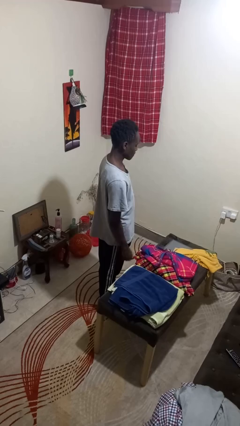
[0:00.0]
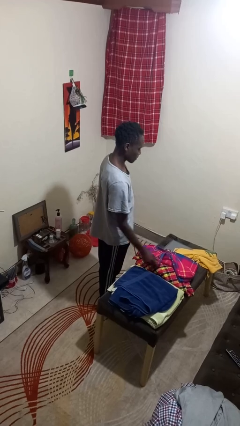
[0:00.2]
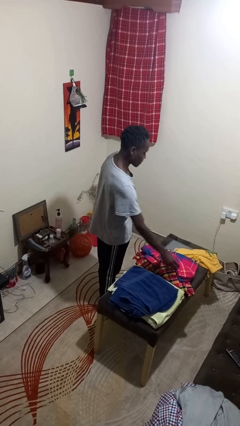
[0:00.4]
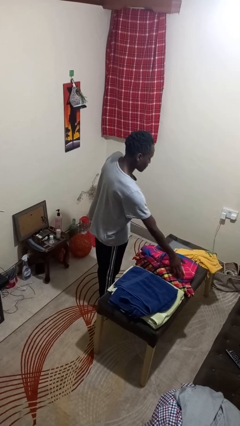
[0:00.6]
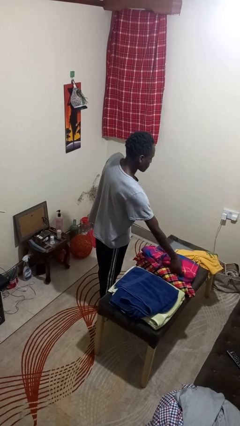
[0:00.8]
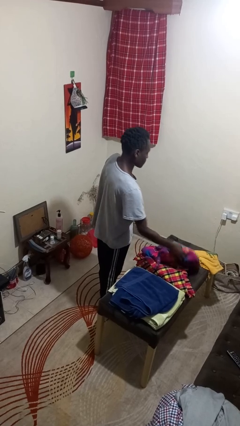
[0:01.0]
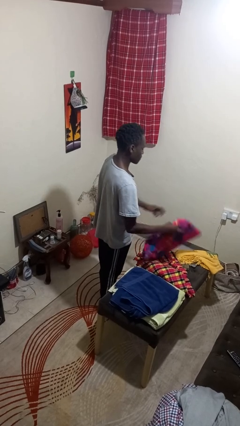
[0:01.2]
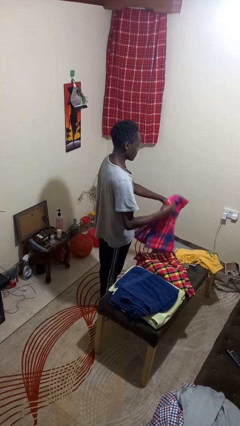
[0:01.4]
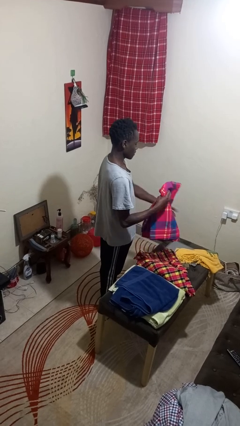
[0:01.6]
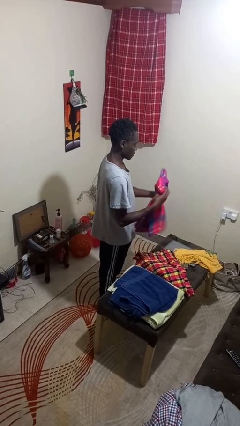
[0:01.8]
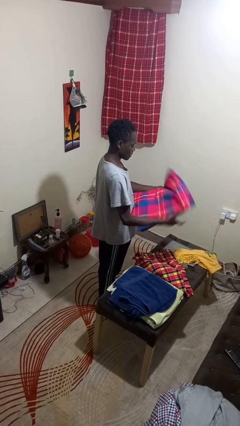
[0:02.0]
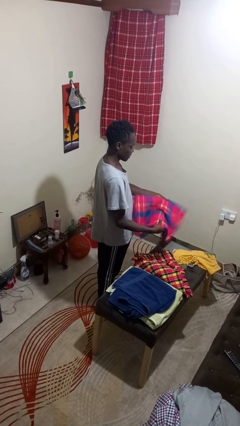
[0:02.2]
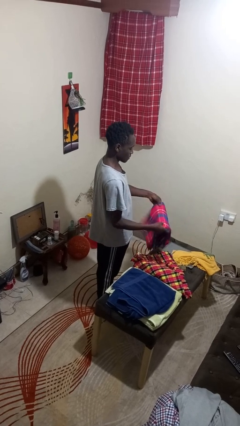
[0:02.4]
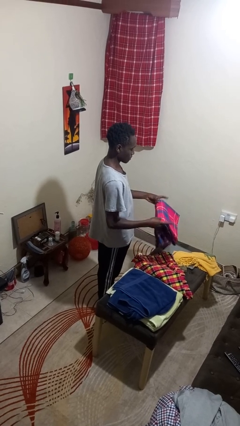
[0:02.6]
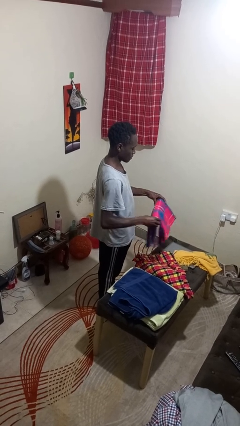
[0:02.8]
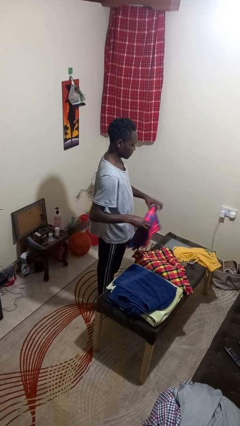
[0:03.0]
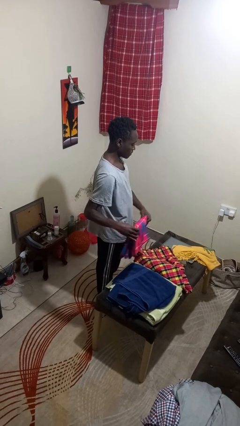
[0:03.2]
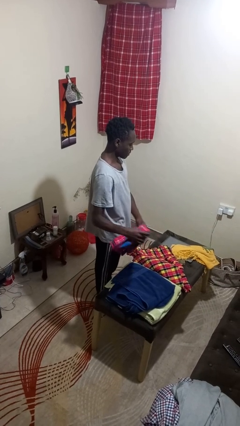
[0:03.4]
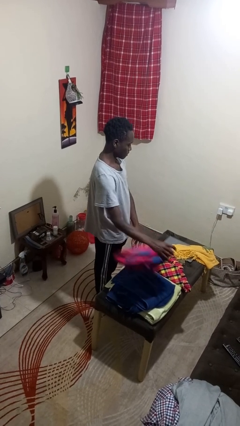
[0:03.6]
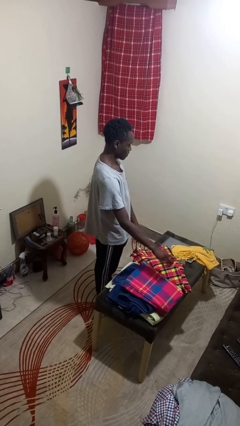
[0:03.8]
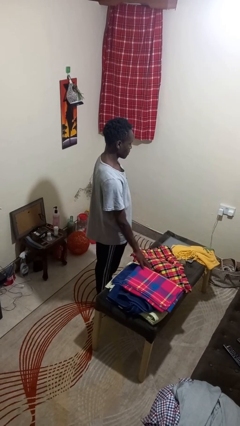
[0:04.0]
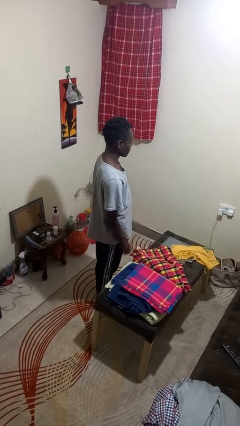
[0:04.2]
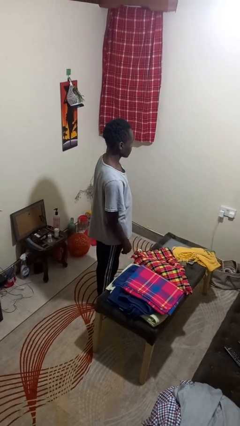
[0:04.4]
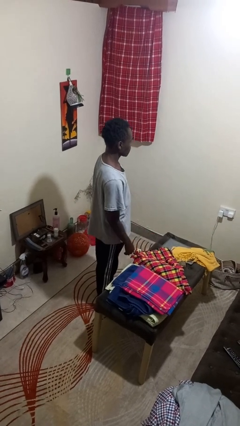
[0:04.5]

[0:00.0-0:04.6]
person folds towel

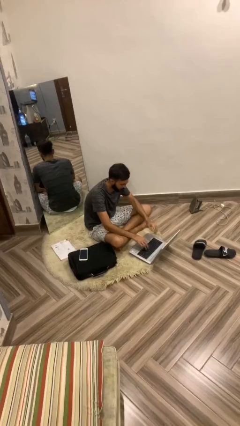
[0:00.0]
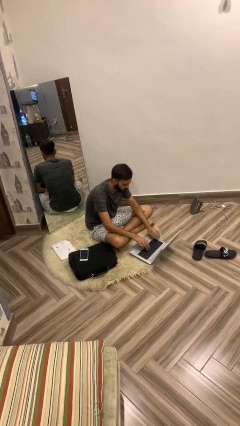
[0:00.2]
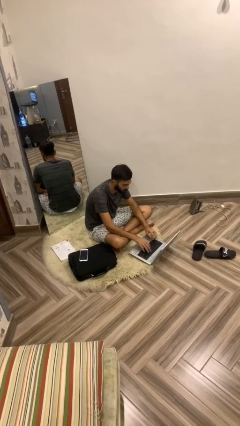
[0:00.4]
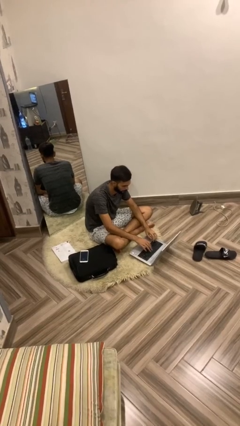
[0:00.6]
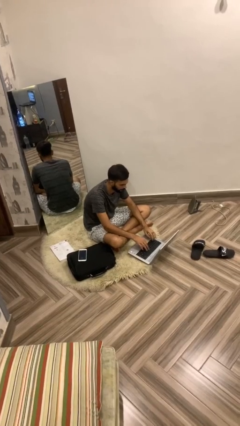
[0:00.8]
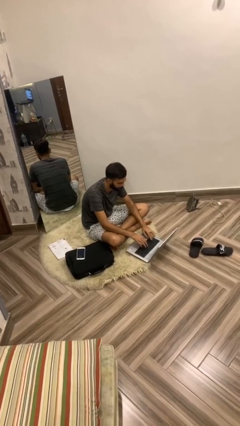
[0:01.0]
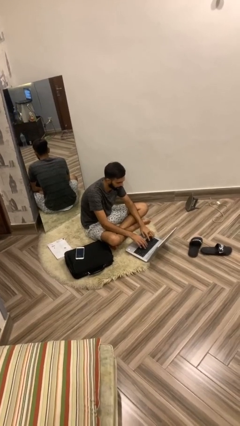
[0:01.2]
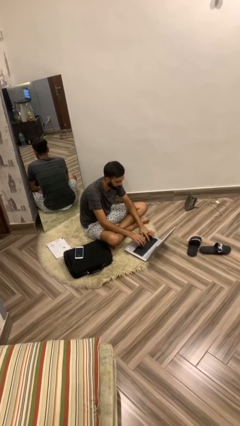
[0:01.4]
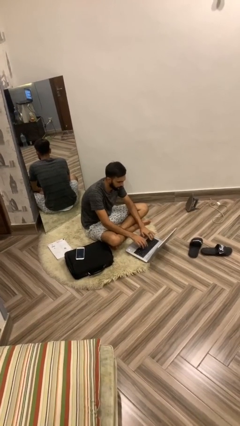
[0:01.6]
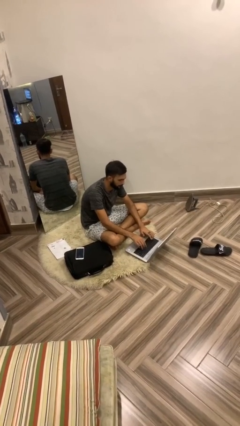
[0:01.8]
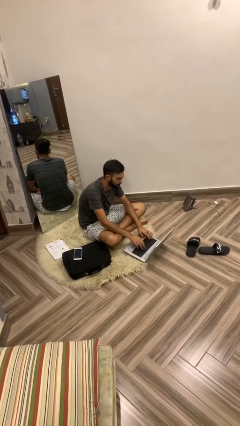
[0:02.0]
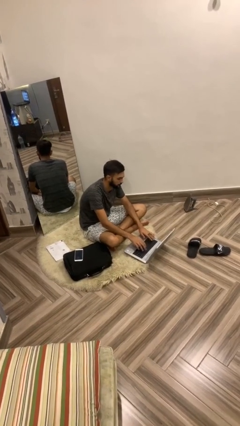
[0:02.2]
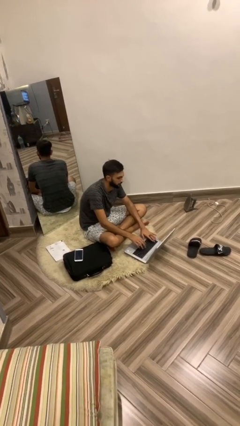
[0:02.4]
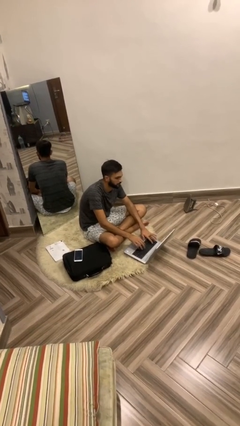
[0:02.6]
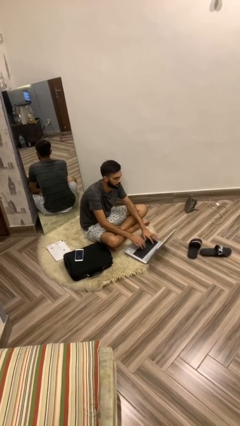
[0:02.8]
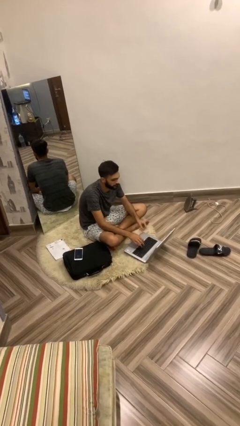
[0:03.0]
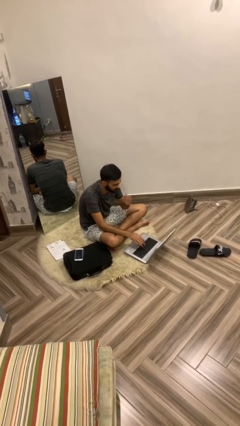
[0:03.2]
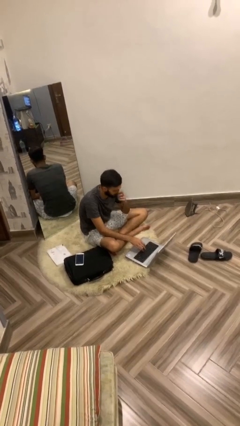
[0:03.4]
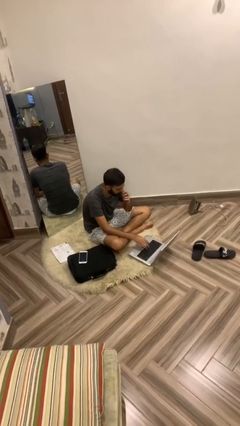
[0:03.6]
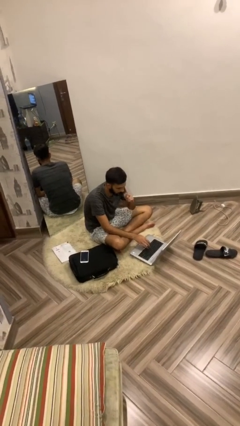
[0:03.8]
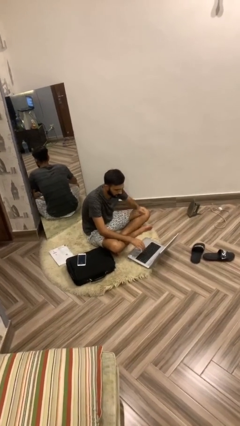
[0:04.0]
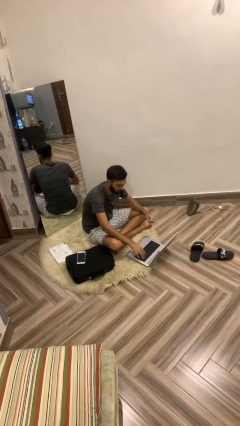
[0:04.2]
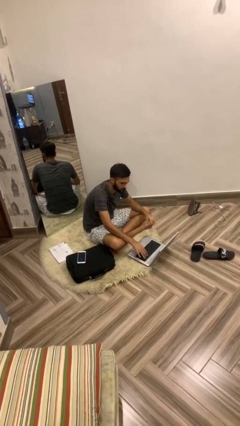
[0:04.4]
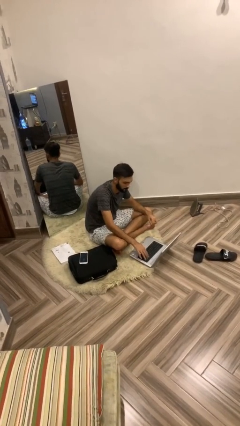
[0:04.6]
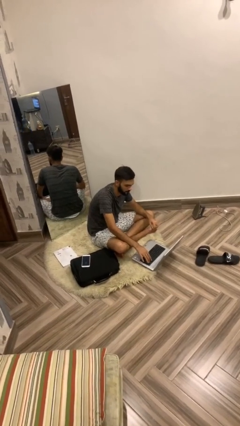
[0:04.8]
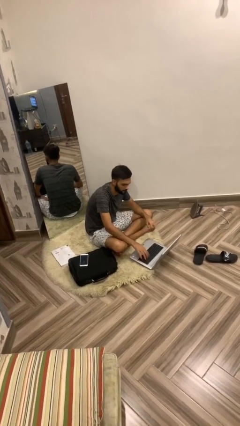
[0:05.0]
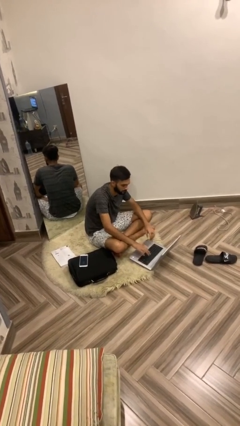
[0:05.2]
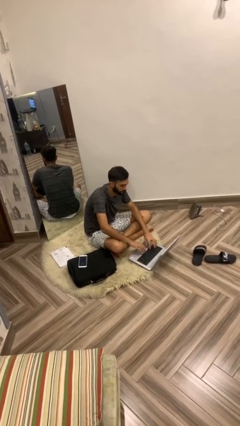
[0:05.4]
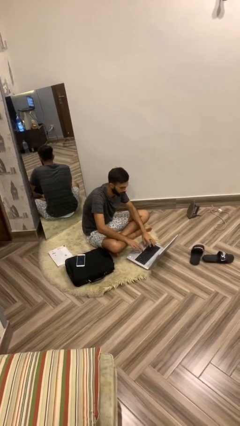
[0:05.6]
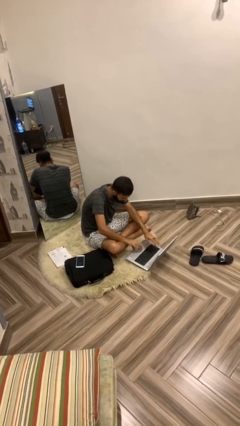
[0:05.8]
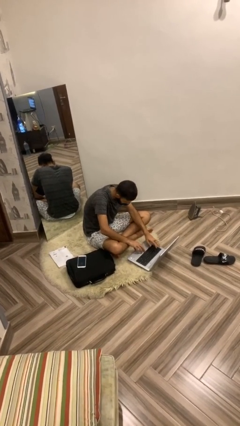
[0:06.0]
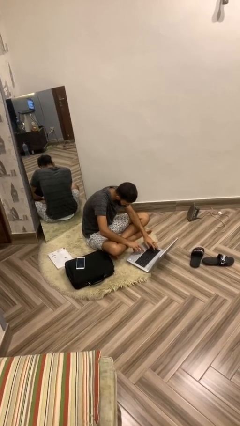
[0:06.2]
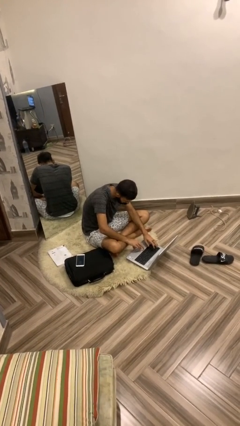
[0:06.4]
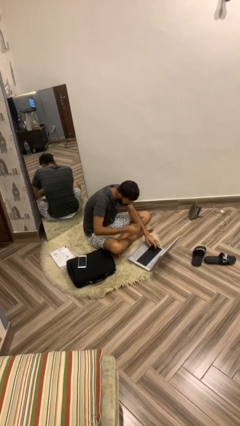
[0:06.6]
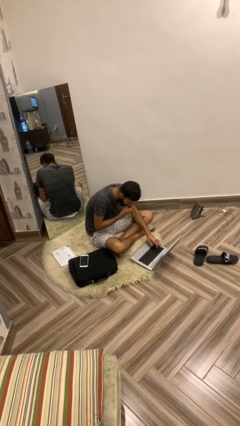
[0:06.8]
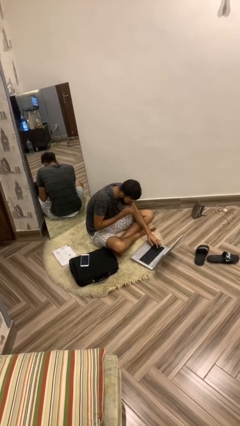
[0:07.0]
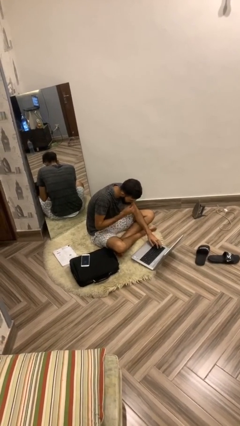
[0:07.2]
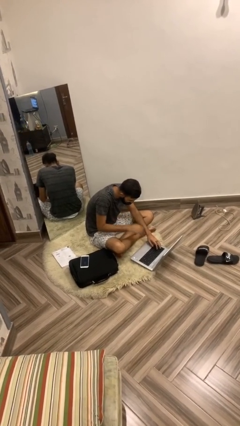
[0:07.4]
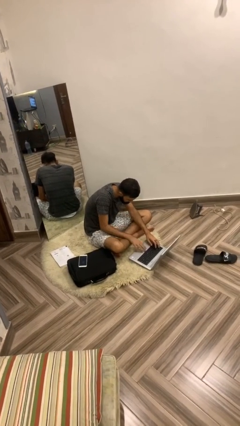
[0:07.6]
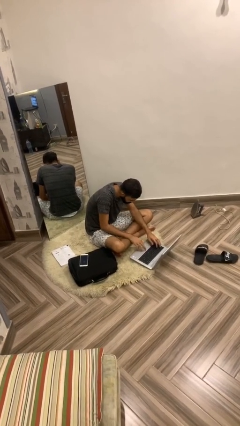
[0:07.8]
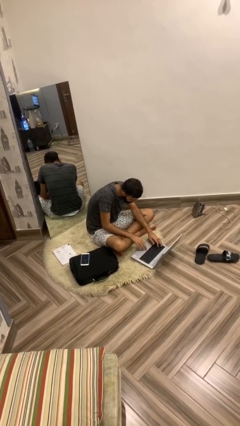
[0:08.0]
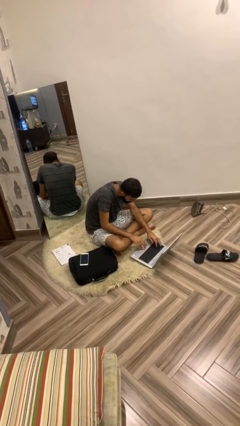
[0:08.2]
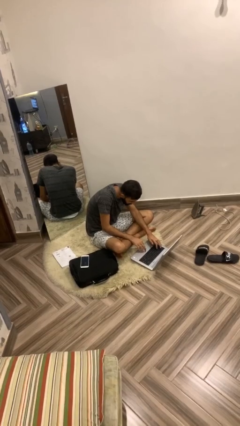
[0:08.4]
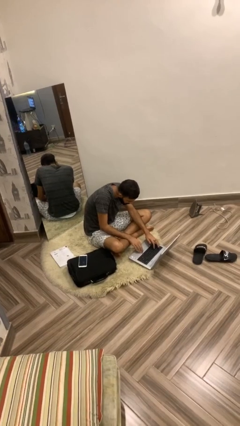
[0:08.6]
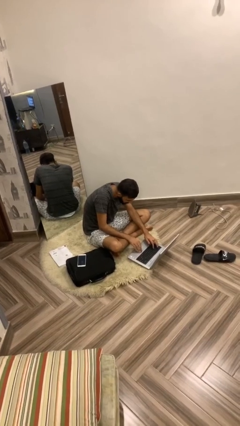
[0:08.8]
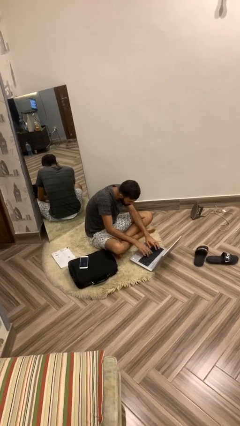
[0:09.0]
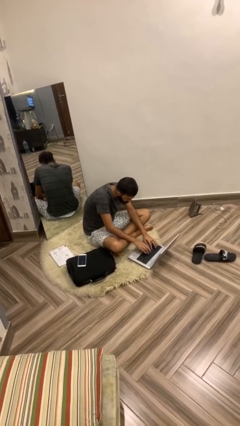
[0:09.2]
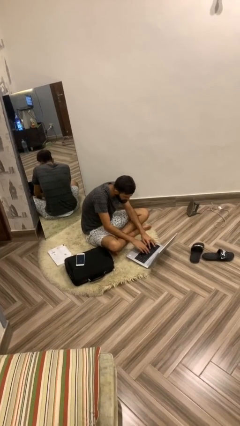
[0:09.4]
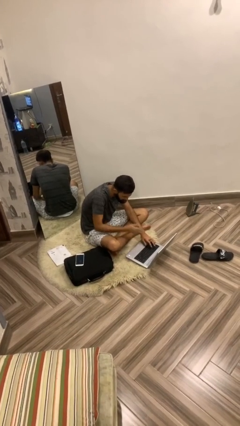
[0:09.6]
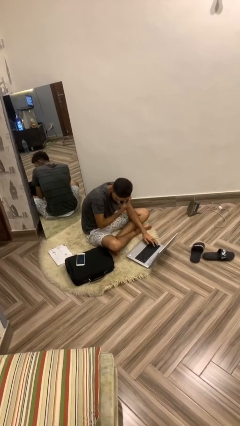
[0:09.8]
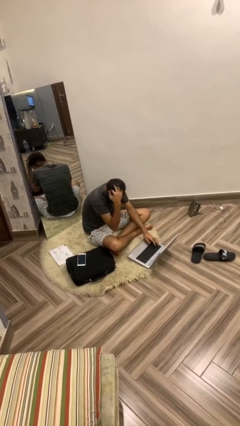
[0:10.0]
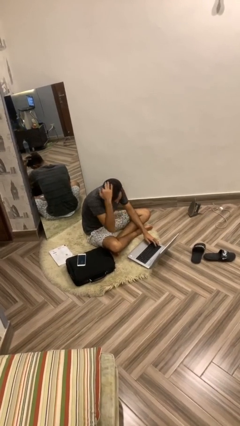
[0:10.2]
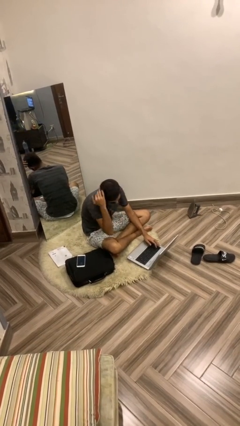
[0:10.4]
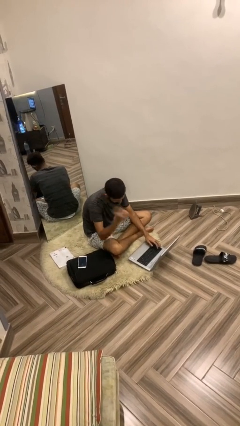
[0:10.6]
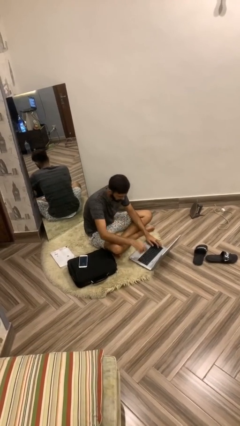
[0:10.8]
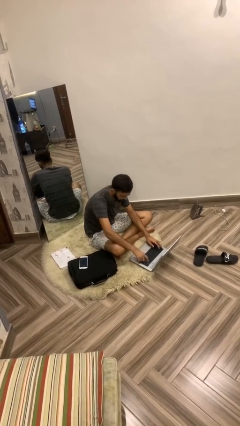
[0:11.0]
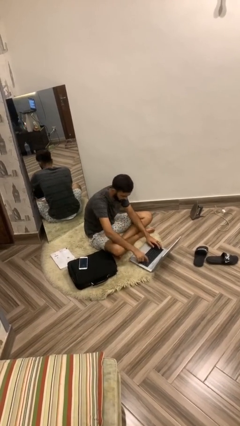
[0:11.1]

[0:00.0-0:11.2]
person interacts with laptop

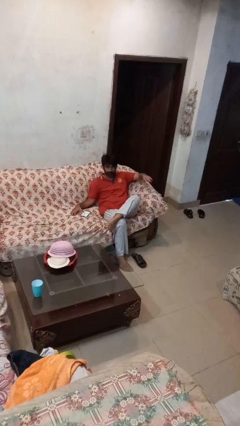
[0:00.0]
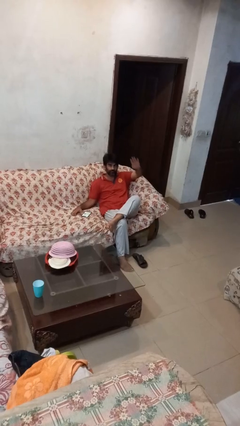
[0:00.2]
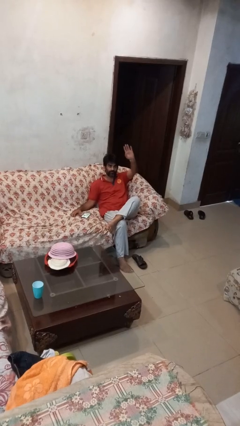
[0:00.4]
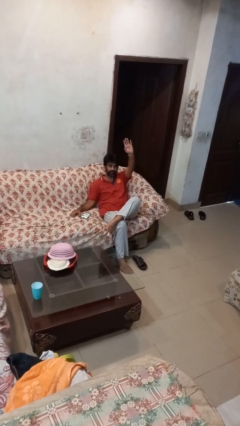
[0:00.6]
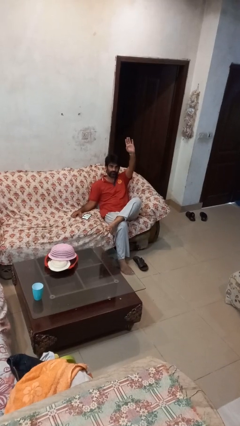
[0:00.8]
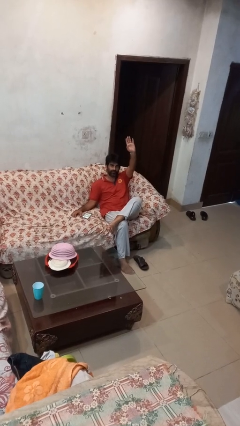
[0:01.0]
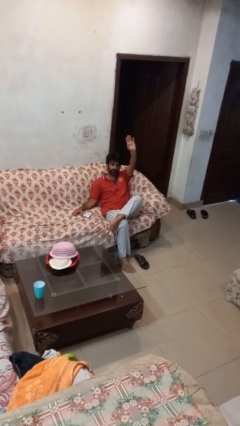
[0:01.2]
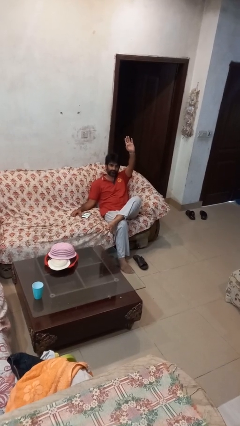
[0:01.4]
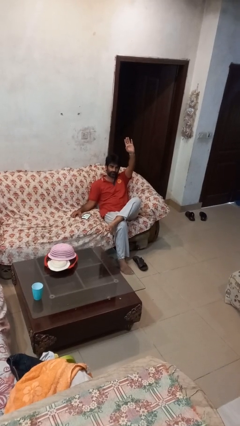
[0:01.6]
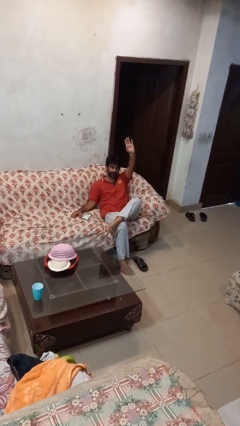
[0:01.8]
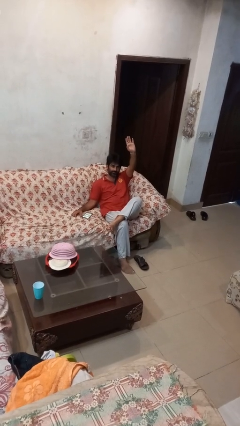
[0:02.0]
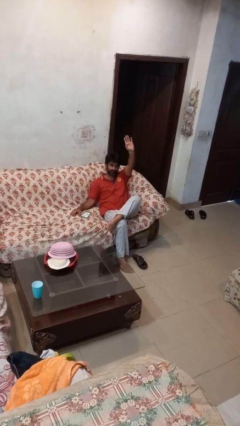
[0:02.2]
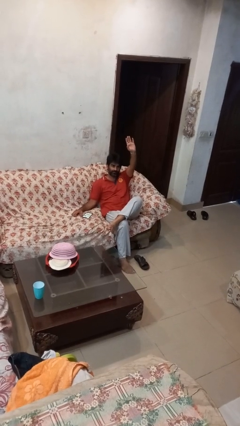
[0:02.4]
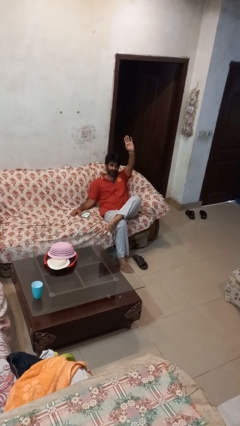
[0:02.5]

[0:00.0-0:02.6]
person gestures raise hand
